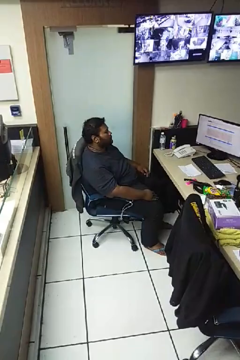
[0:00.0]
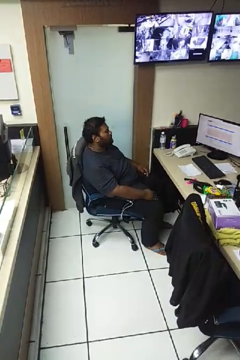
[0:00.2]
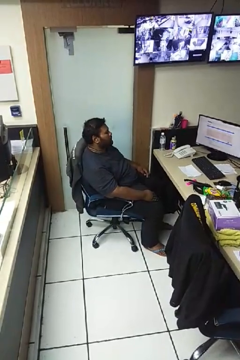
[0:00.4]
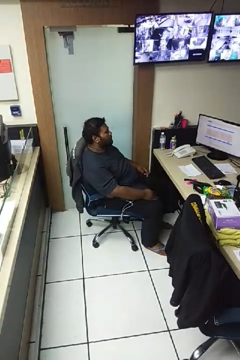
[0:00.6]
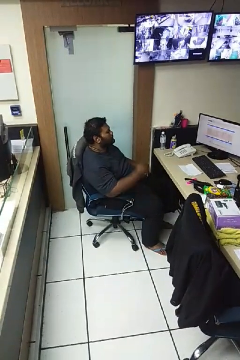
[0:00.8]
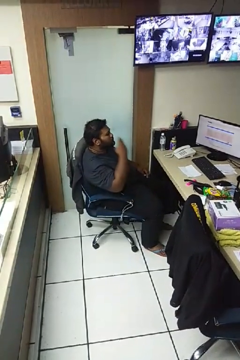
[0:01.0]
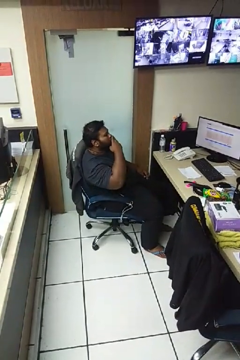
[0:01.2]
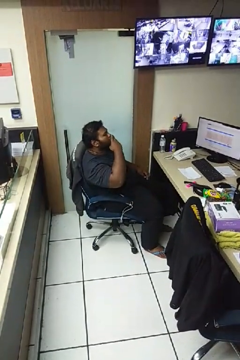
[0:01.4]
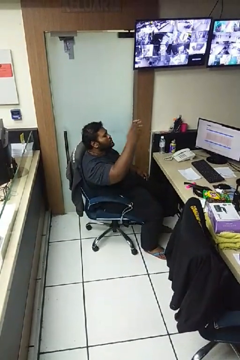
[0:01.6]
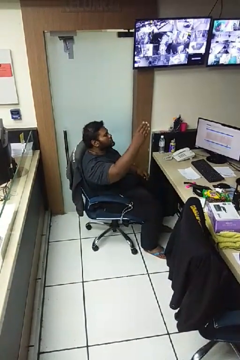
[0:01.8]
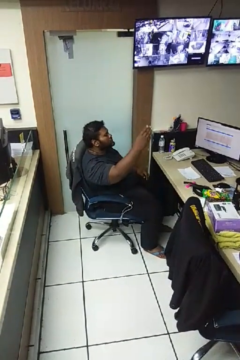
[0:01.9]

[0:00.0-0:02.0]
person gestures blow kiss

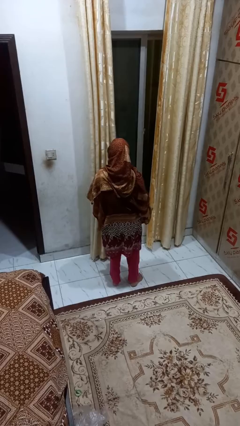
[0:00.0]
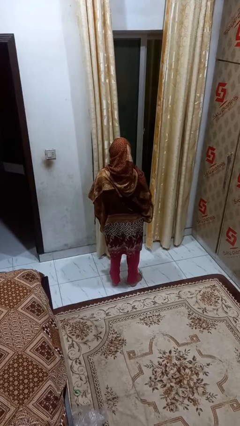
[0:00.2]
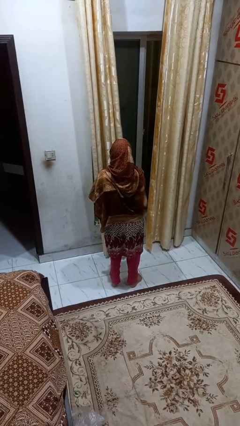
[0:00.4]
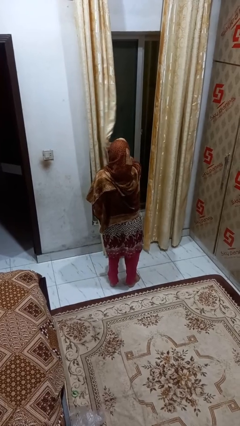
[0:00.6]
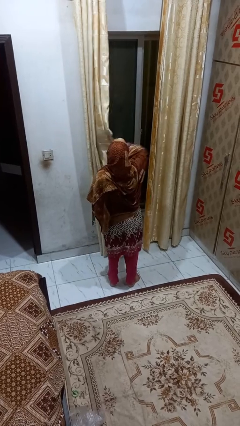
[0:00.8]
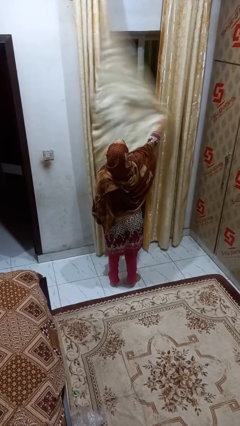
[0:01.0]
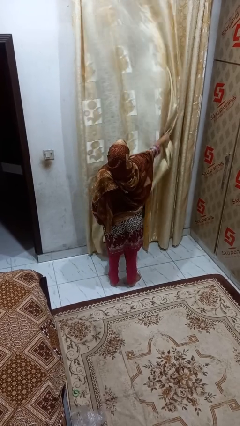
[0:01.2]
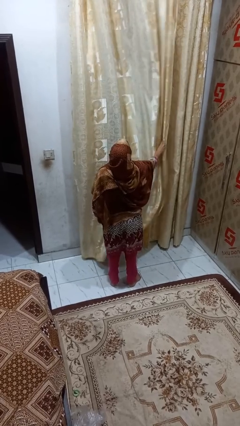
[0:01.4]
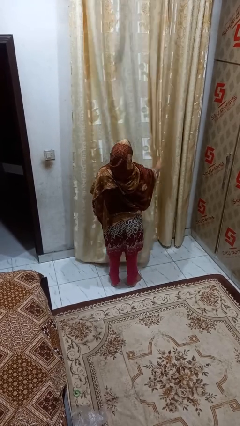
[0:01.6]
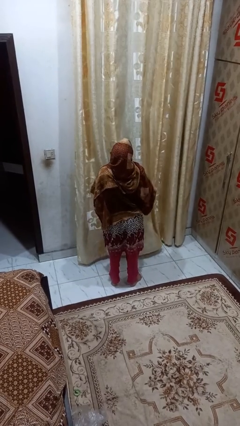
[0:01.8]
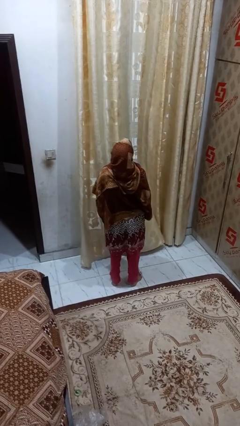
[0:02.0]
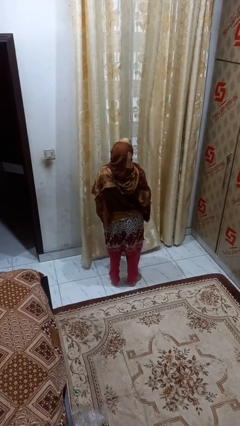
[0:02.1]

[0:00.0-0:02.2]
person closes curtains

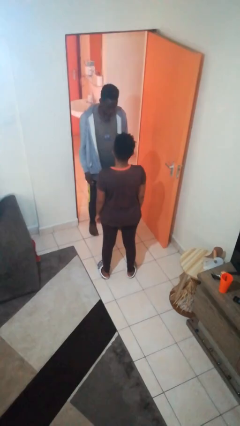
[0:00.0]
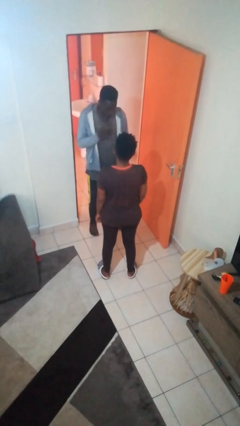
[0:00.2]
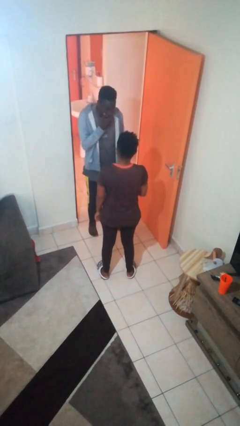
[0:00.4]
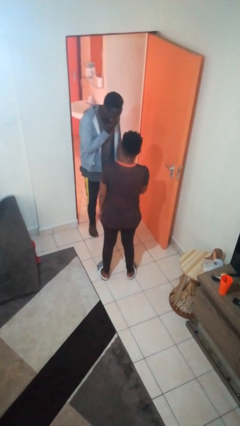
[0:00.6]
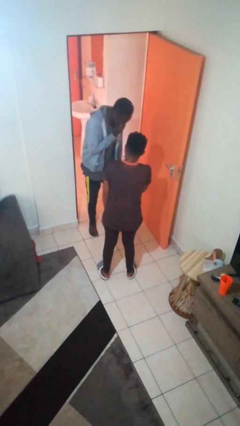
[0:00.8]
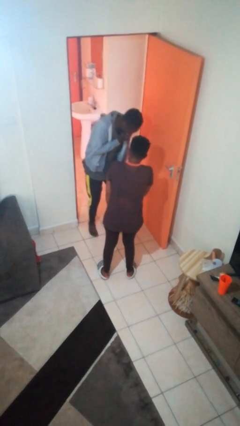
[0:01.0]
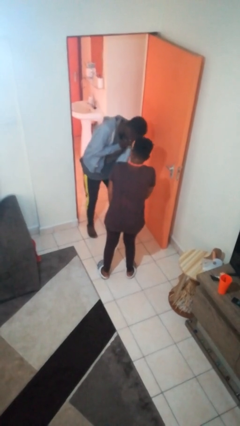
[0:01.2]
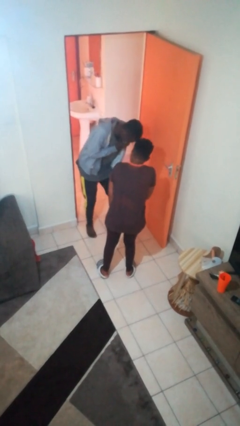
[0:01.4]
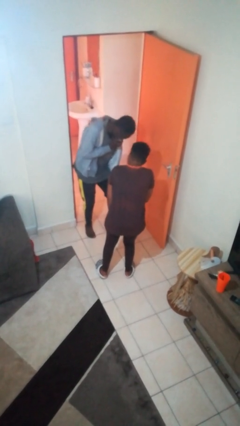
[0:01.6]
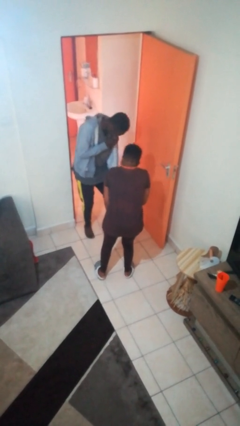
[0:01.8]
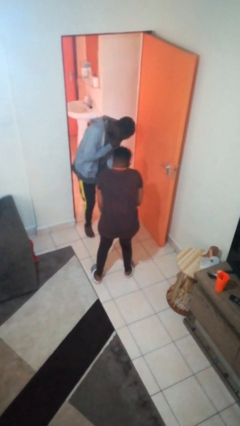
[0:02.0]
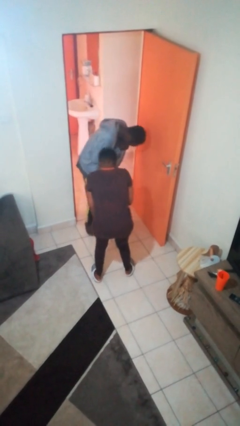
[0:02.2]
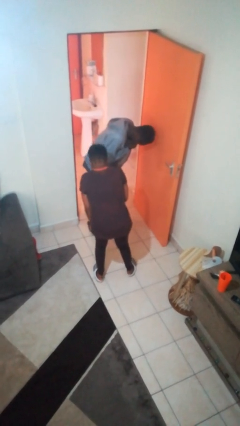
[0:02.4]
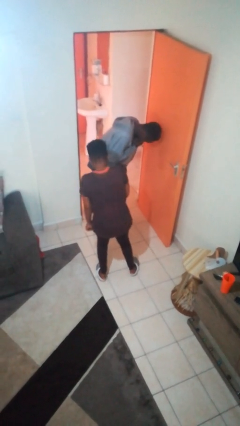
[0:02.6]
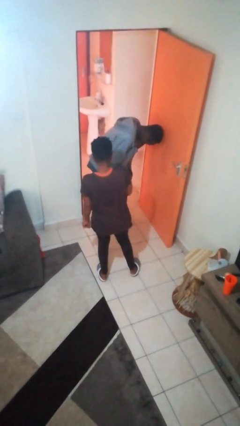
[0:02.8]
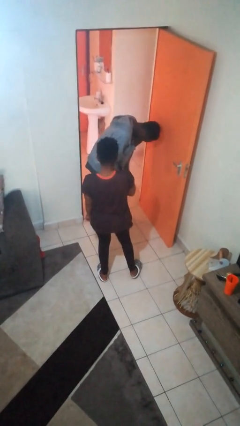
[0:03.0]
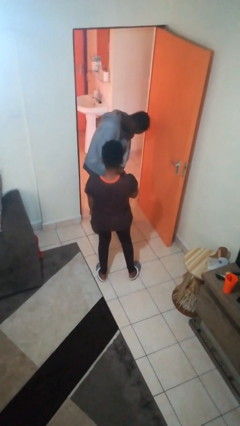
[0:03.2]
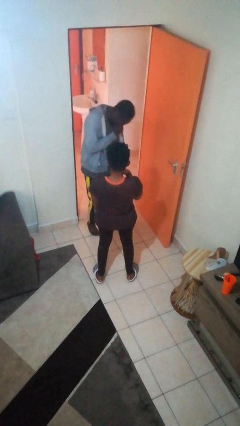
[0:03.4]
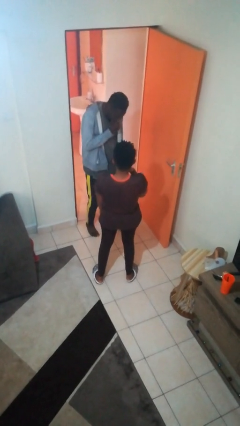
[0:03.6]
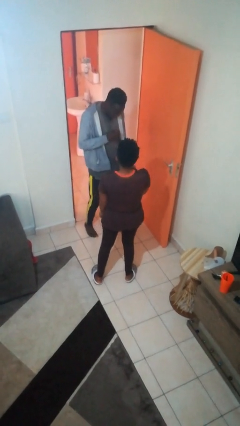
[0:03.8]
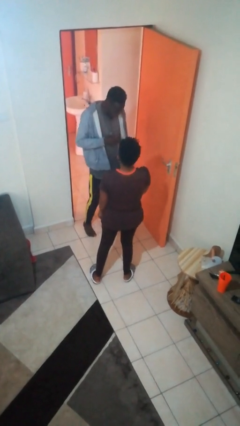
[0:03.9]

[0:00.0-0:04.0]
person laughs with person

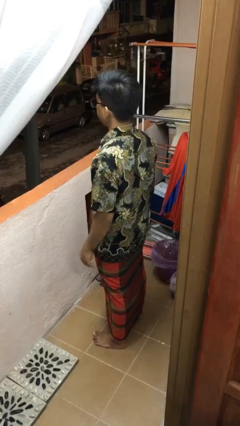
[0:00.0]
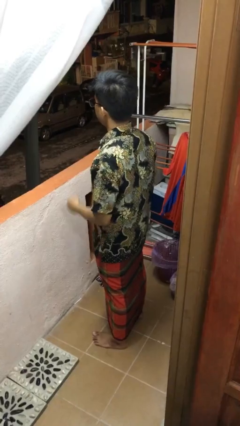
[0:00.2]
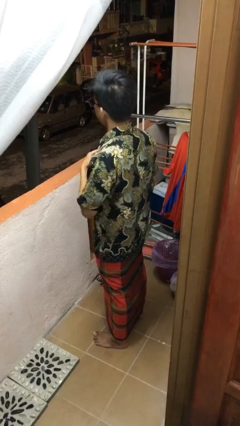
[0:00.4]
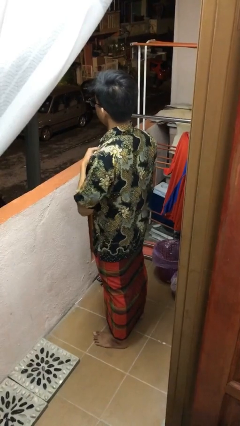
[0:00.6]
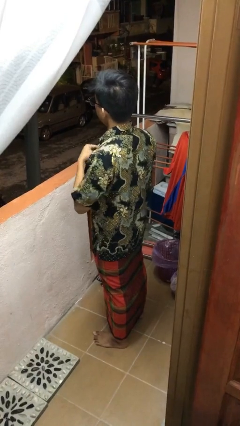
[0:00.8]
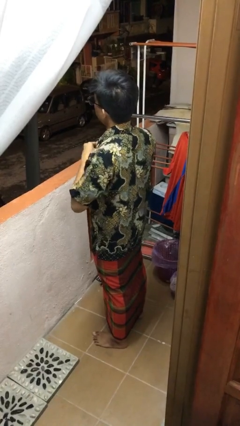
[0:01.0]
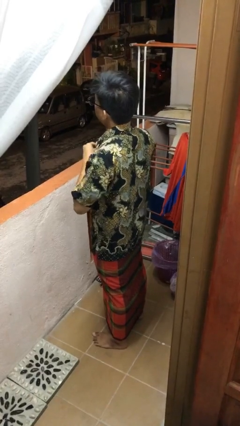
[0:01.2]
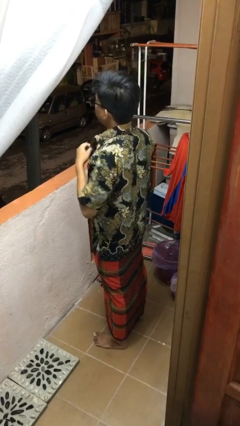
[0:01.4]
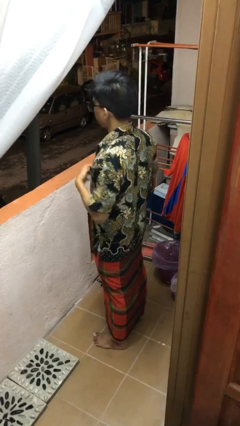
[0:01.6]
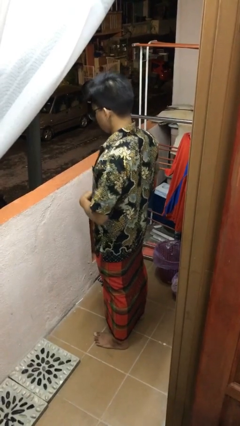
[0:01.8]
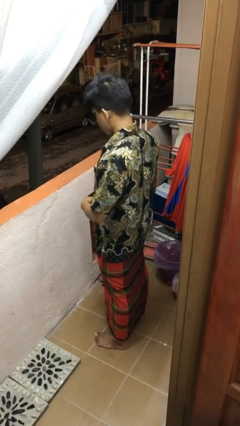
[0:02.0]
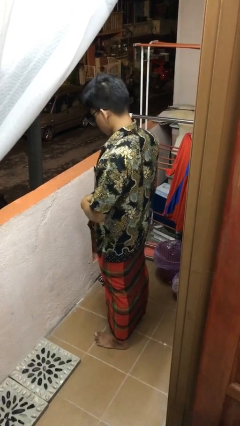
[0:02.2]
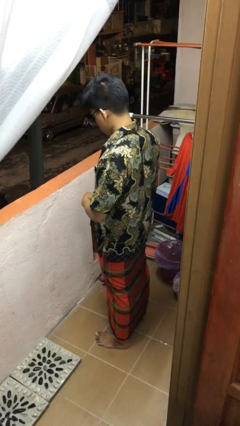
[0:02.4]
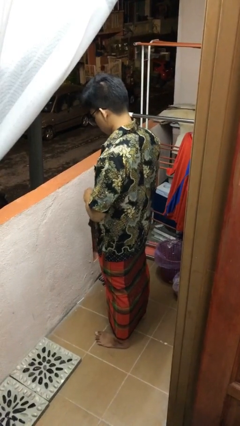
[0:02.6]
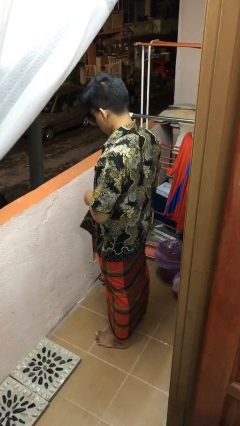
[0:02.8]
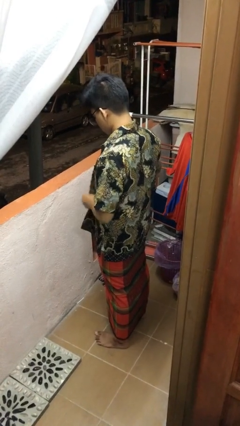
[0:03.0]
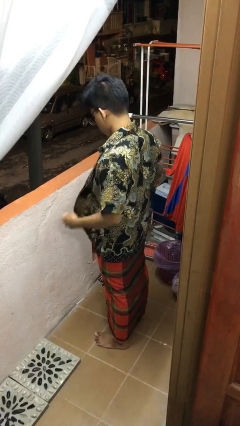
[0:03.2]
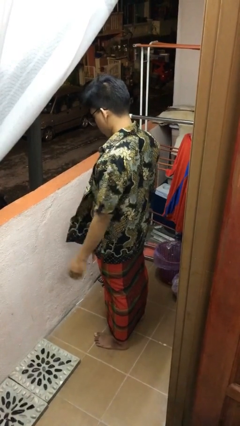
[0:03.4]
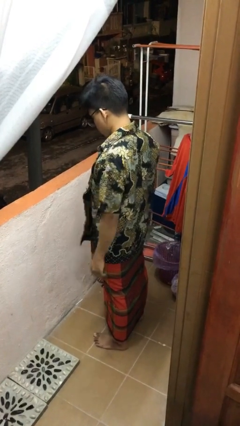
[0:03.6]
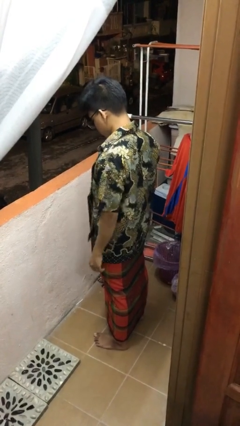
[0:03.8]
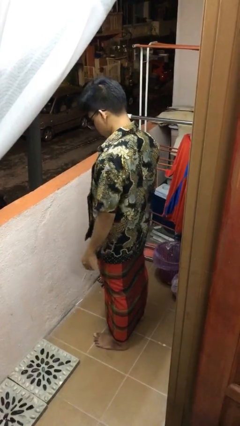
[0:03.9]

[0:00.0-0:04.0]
person unbuttons shirt

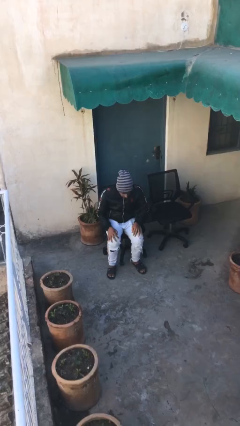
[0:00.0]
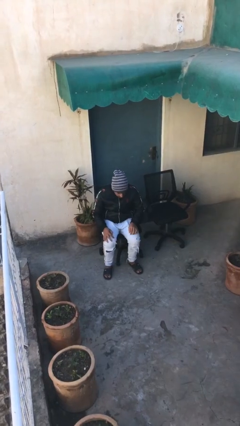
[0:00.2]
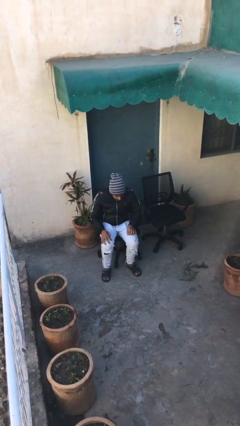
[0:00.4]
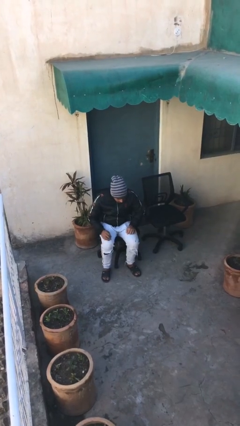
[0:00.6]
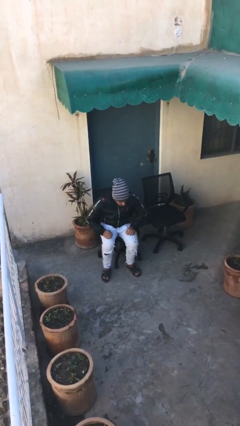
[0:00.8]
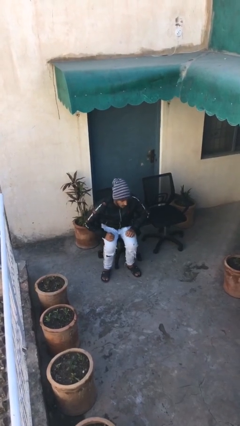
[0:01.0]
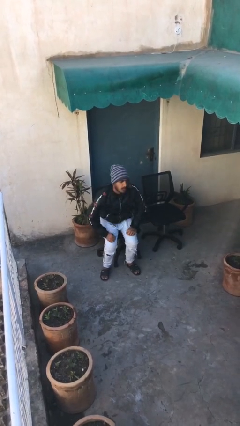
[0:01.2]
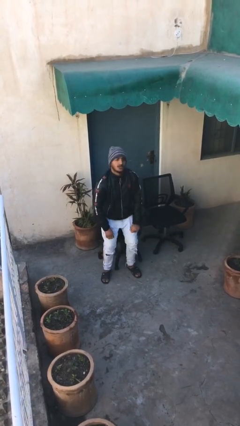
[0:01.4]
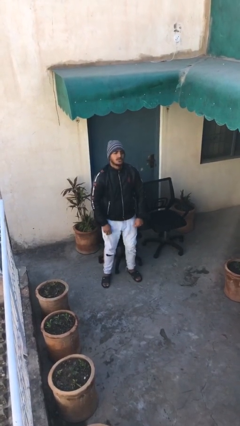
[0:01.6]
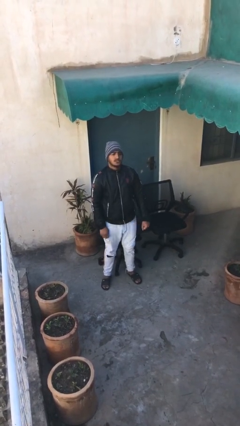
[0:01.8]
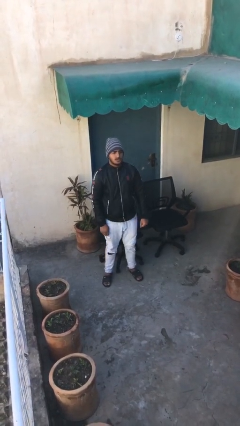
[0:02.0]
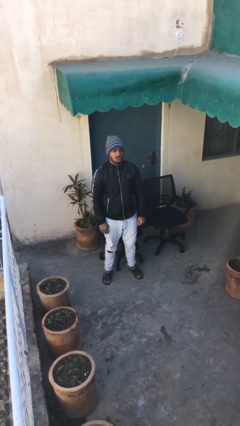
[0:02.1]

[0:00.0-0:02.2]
person stands up

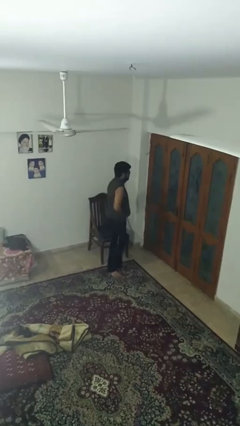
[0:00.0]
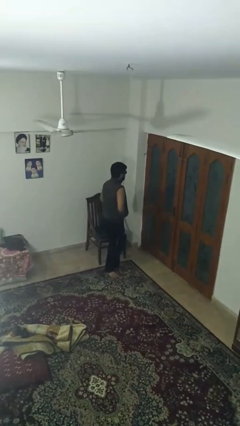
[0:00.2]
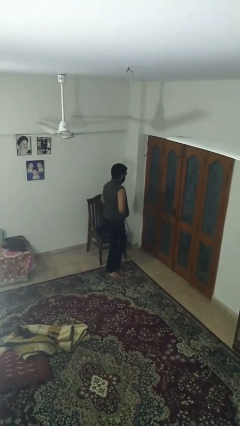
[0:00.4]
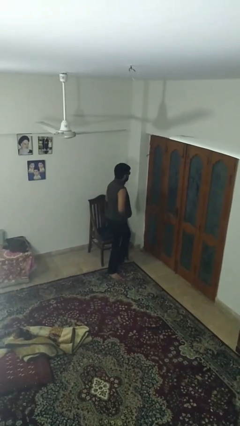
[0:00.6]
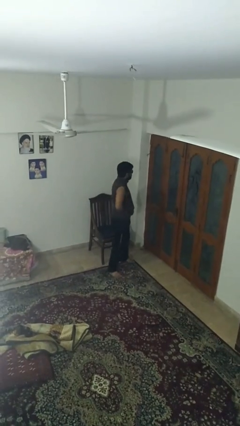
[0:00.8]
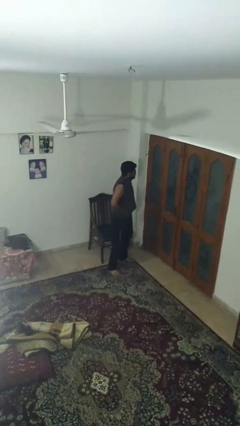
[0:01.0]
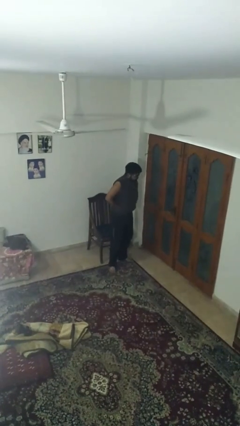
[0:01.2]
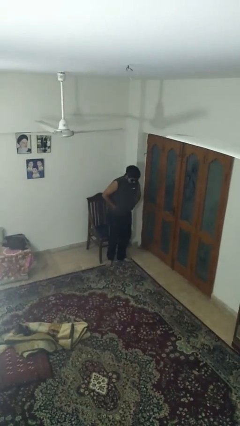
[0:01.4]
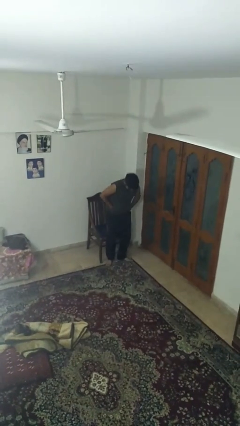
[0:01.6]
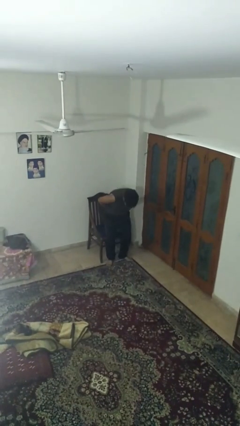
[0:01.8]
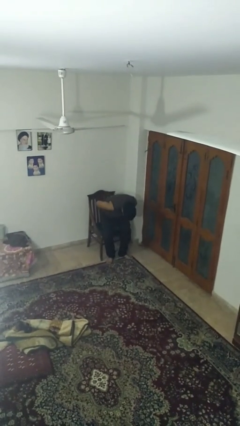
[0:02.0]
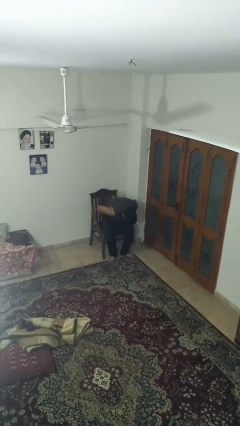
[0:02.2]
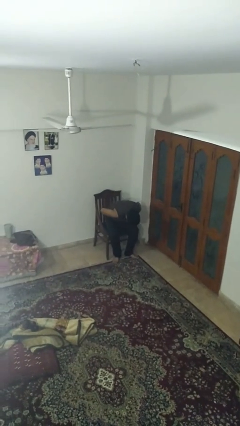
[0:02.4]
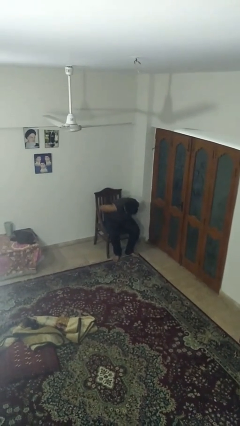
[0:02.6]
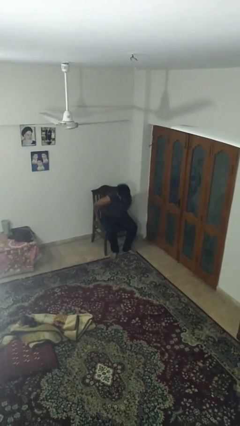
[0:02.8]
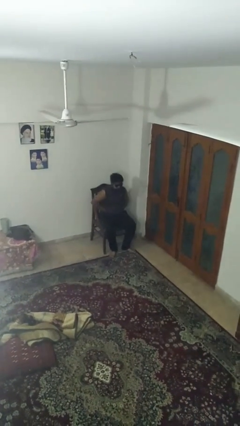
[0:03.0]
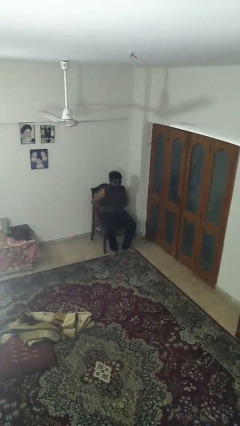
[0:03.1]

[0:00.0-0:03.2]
person sits down

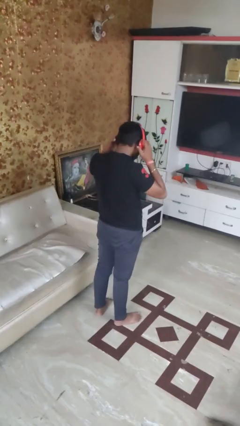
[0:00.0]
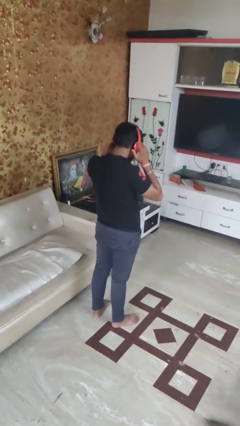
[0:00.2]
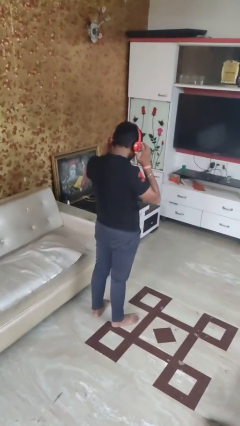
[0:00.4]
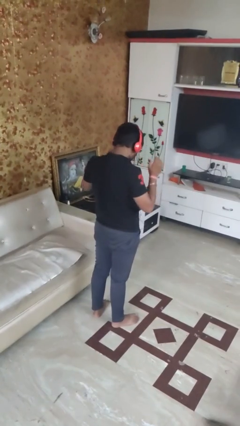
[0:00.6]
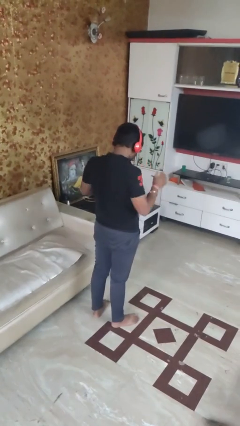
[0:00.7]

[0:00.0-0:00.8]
person puts on headphones
